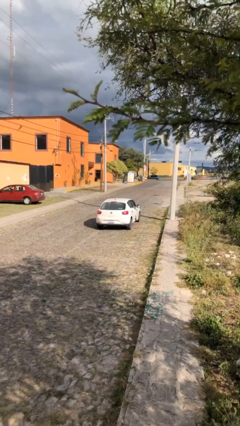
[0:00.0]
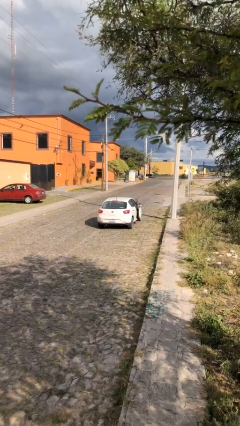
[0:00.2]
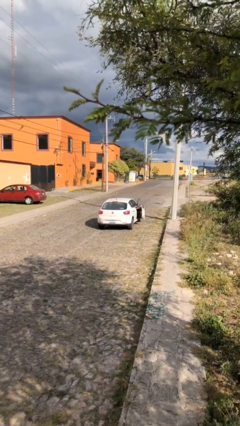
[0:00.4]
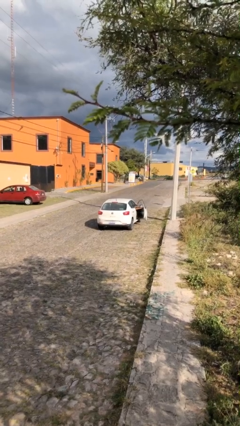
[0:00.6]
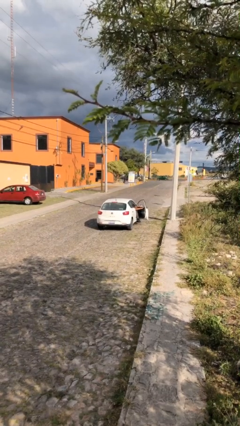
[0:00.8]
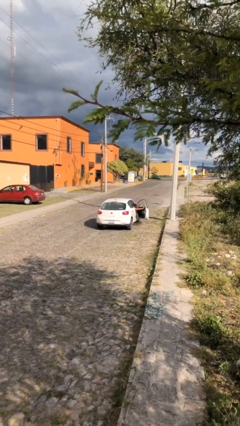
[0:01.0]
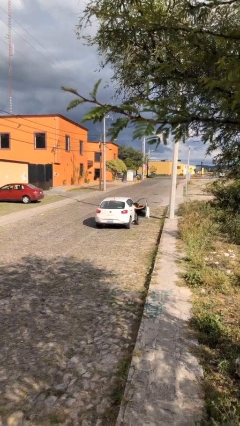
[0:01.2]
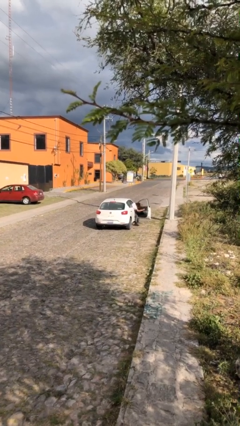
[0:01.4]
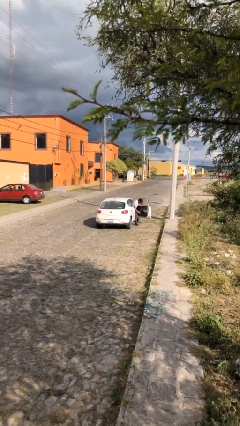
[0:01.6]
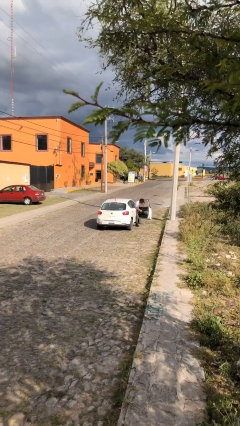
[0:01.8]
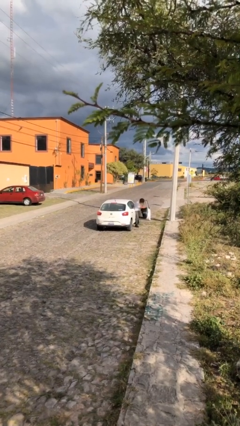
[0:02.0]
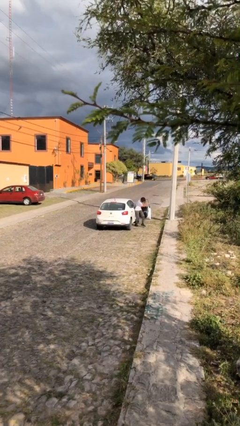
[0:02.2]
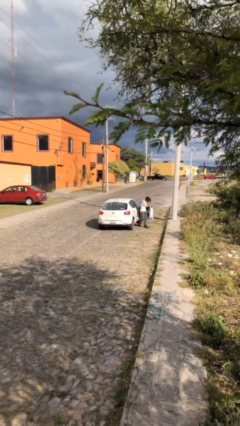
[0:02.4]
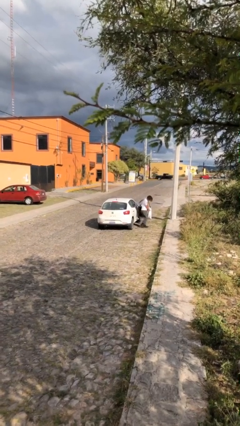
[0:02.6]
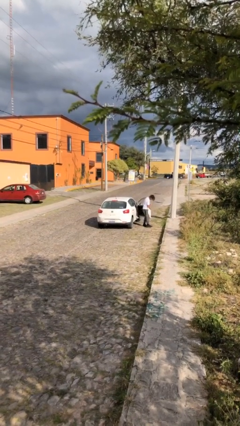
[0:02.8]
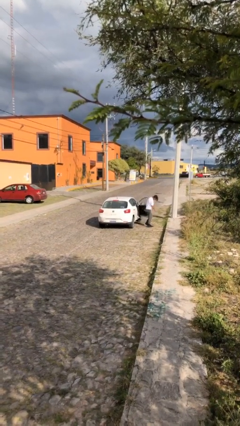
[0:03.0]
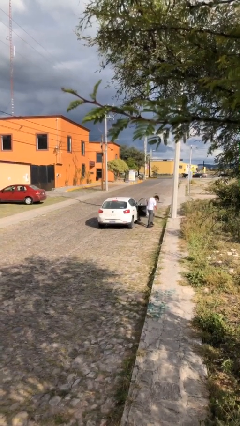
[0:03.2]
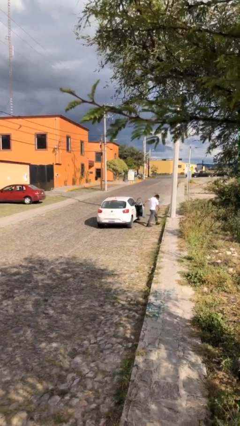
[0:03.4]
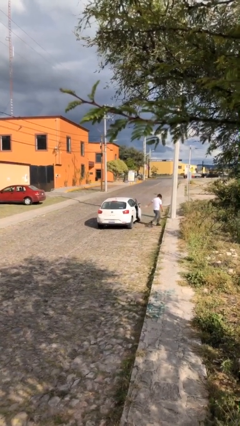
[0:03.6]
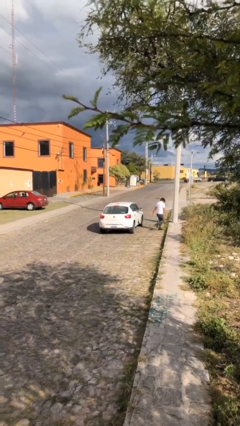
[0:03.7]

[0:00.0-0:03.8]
car drops off person

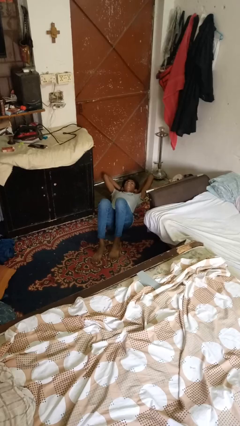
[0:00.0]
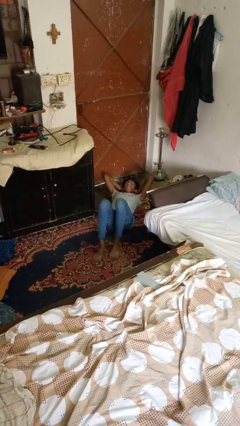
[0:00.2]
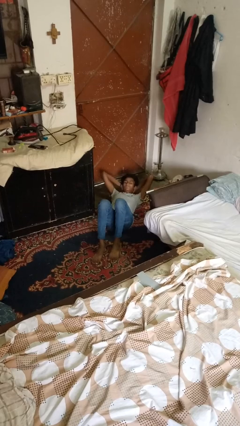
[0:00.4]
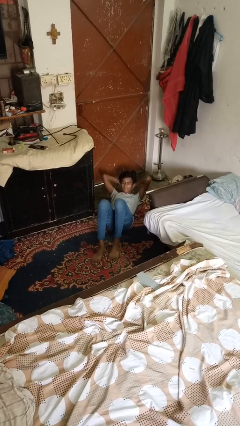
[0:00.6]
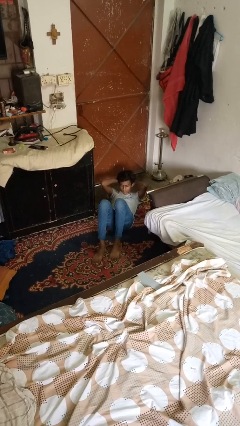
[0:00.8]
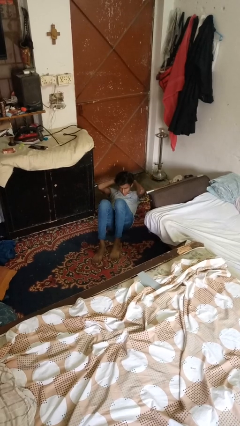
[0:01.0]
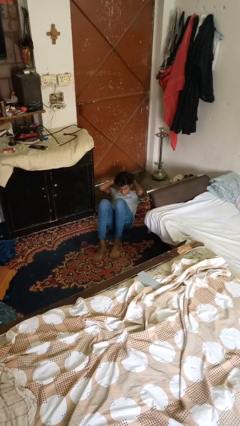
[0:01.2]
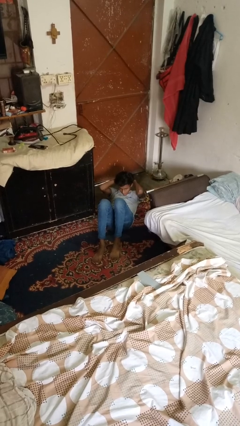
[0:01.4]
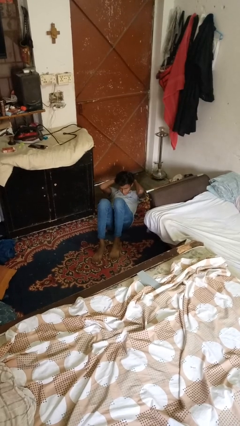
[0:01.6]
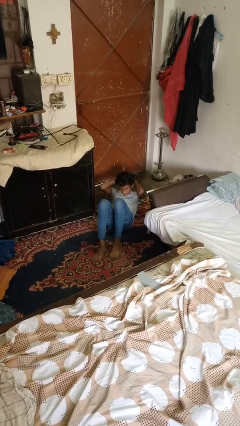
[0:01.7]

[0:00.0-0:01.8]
person exercises with situp

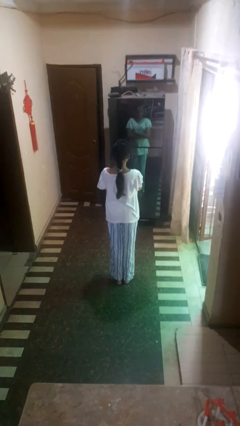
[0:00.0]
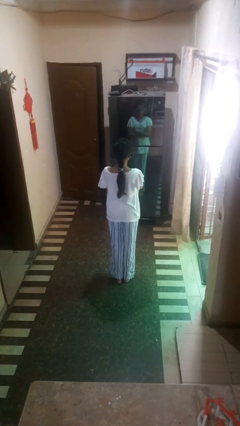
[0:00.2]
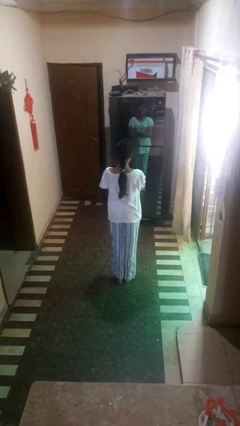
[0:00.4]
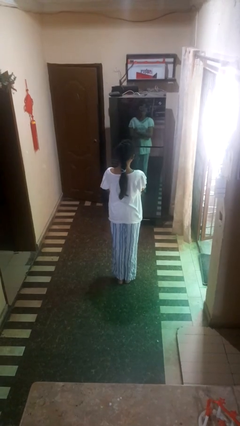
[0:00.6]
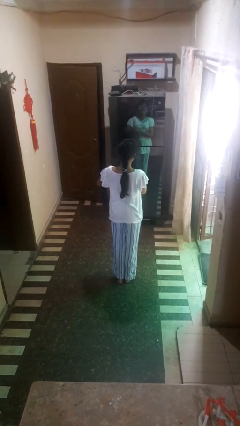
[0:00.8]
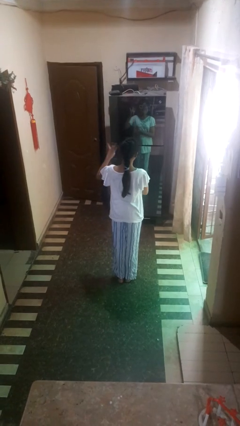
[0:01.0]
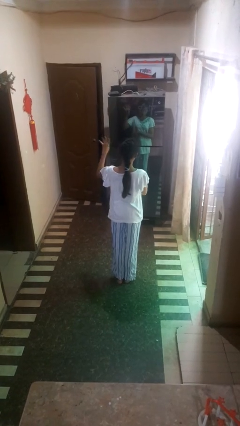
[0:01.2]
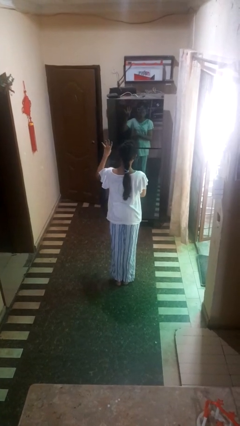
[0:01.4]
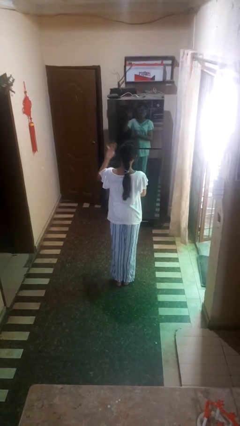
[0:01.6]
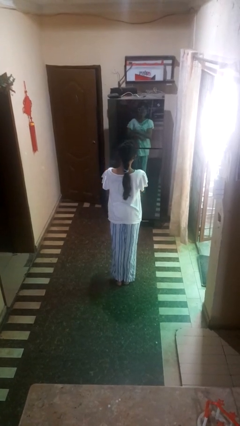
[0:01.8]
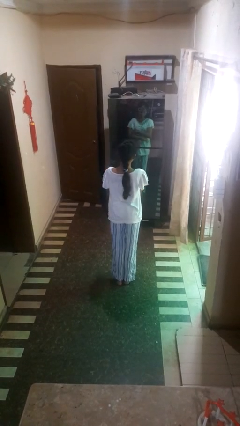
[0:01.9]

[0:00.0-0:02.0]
person gestures number four

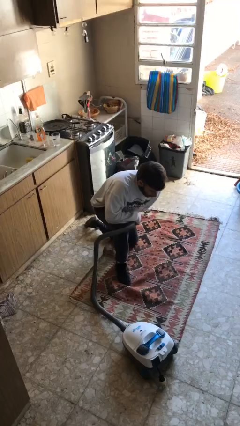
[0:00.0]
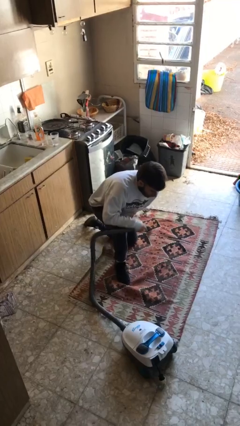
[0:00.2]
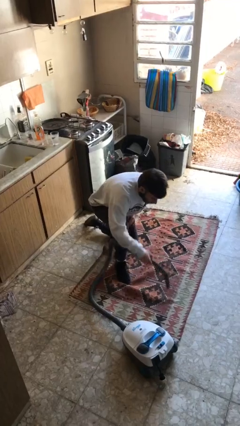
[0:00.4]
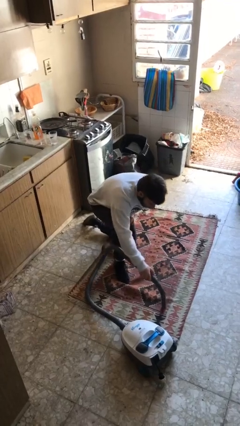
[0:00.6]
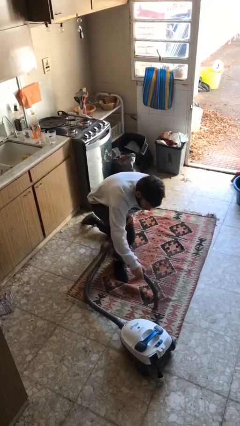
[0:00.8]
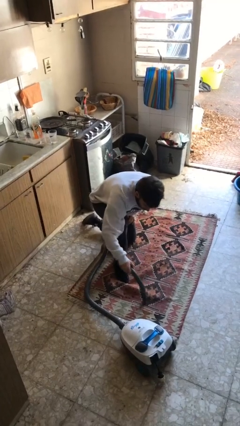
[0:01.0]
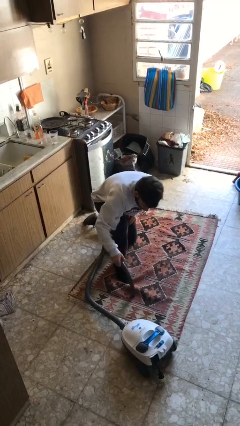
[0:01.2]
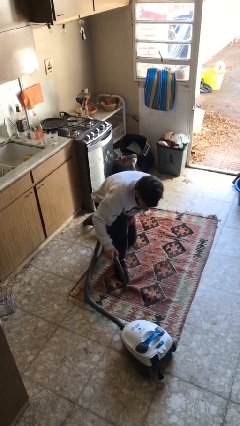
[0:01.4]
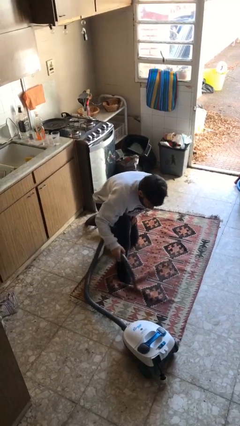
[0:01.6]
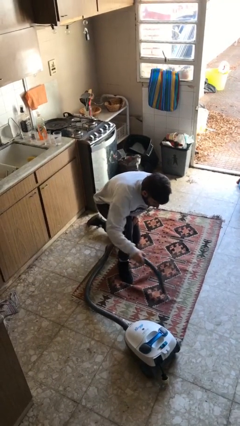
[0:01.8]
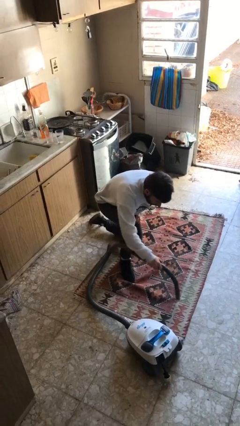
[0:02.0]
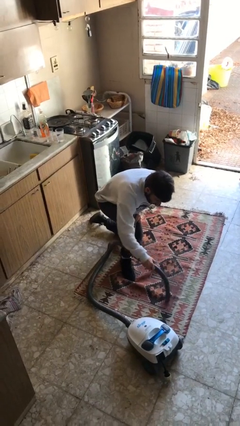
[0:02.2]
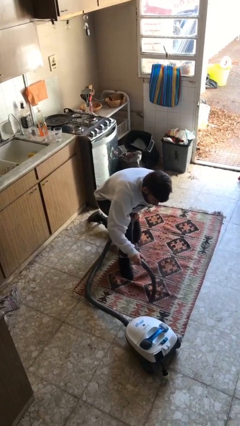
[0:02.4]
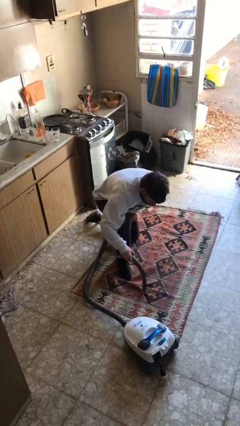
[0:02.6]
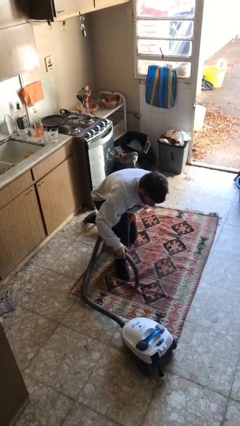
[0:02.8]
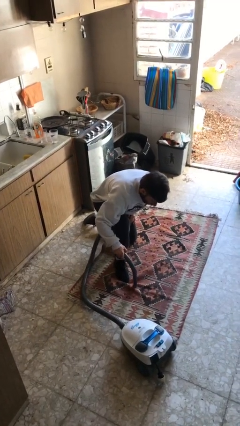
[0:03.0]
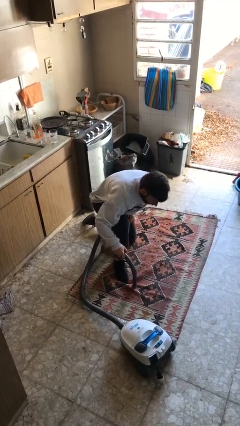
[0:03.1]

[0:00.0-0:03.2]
person vacuums carpet

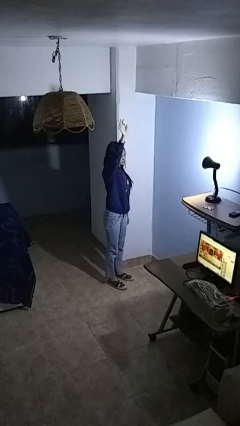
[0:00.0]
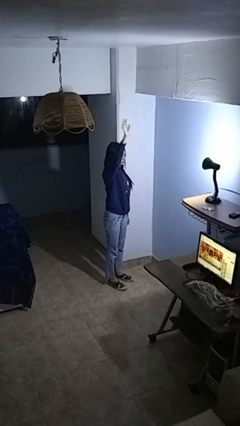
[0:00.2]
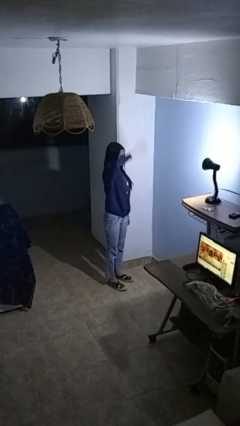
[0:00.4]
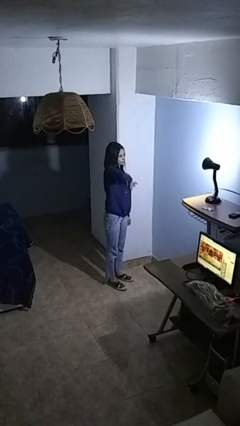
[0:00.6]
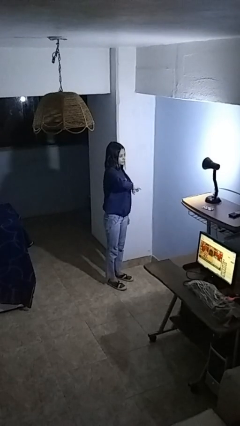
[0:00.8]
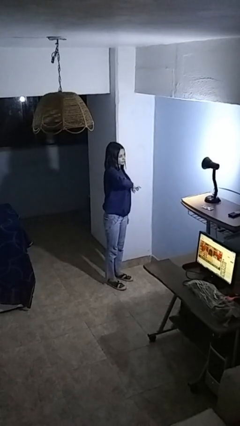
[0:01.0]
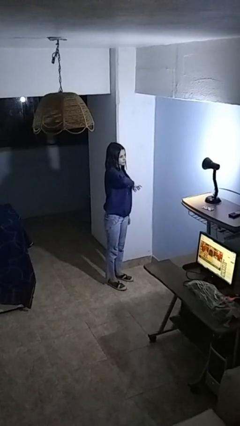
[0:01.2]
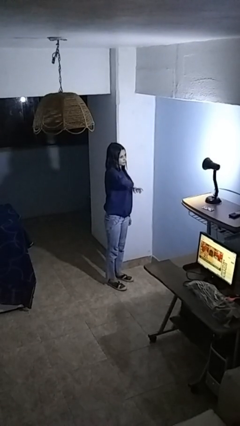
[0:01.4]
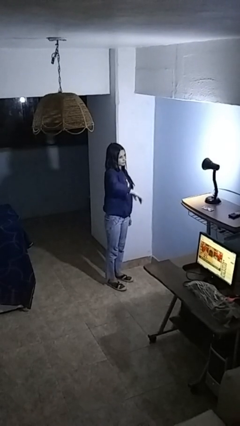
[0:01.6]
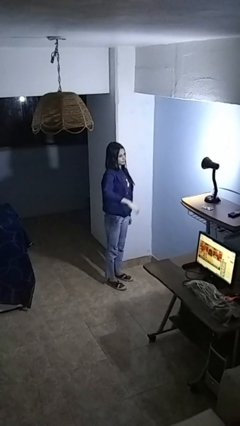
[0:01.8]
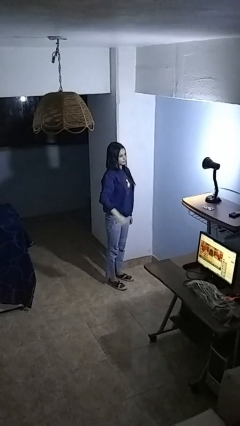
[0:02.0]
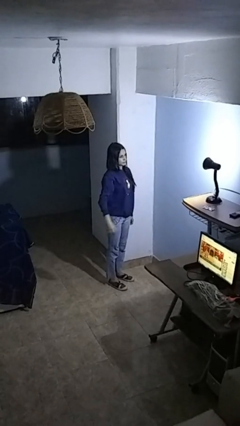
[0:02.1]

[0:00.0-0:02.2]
person gestures swipe down

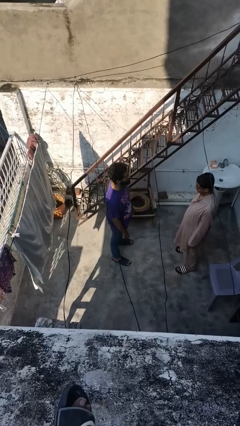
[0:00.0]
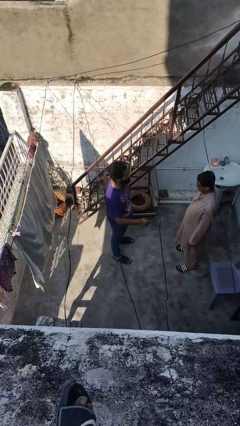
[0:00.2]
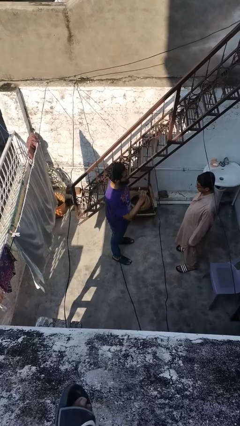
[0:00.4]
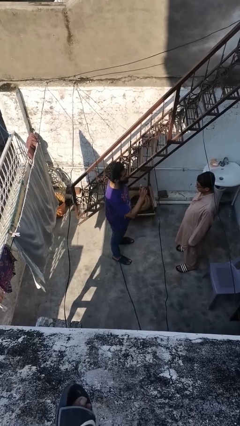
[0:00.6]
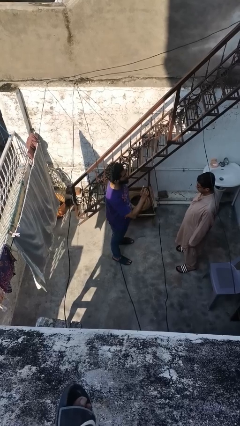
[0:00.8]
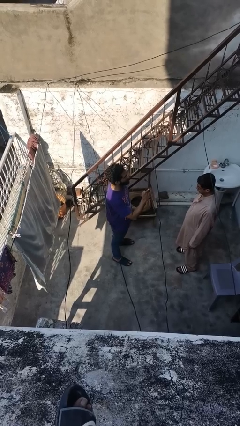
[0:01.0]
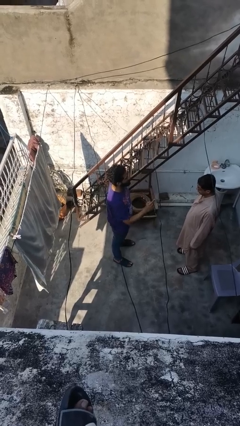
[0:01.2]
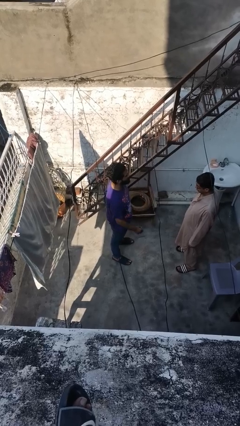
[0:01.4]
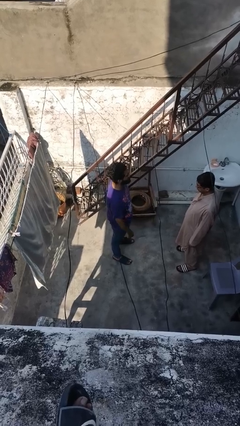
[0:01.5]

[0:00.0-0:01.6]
person points at person

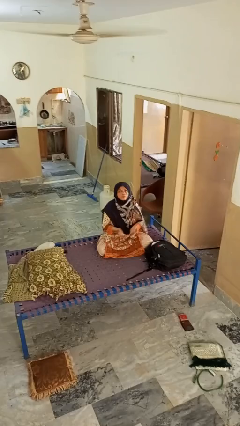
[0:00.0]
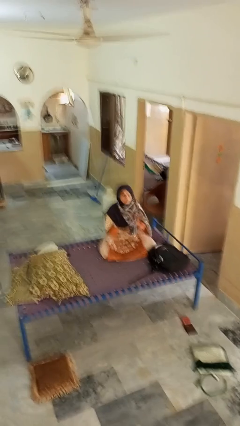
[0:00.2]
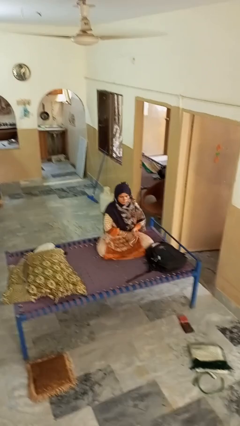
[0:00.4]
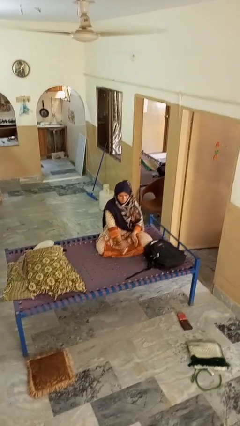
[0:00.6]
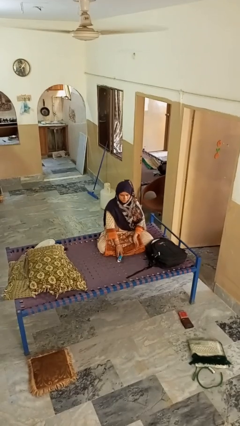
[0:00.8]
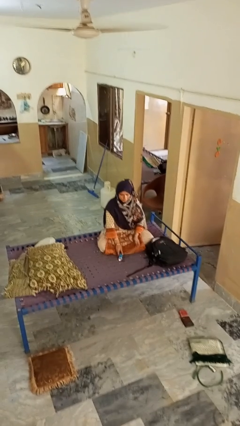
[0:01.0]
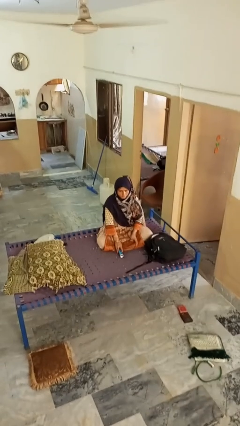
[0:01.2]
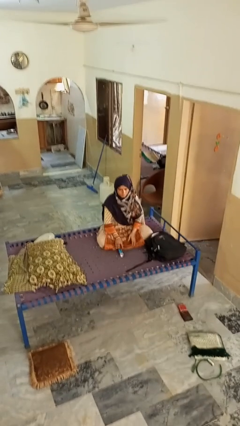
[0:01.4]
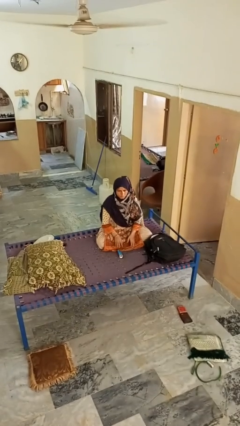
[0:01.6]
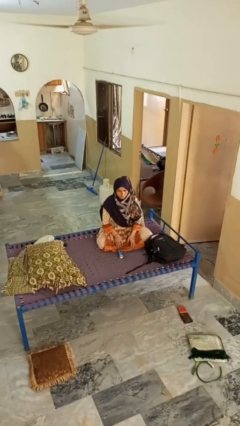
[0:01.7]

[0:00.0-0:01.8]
person catches dropped object

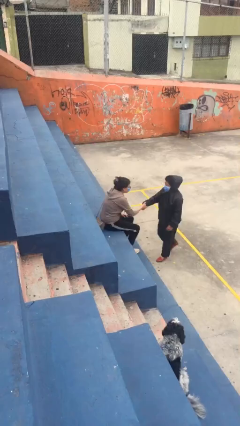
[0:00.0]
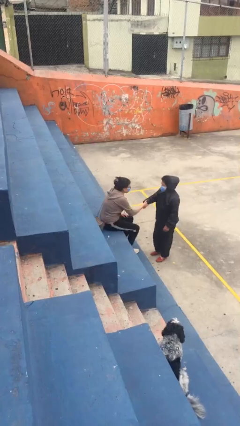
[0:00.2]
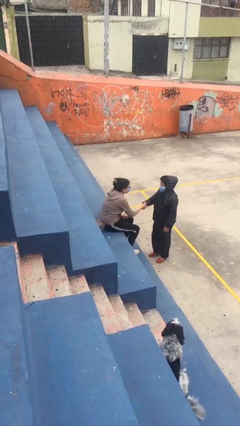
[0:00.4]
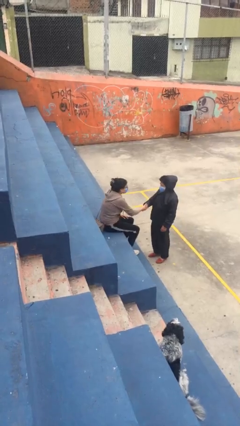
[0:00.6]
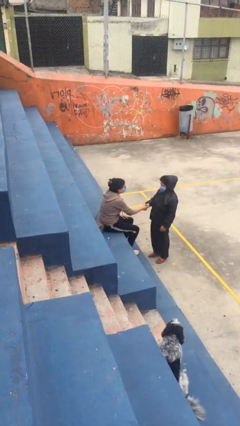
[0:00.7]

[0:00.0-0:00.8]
person shakes hand
